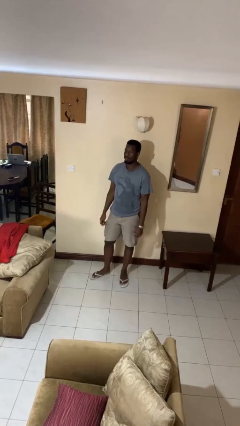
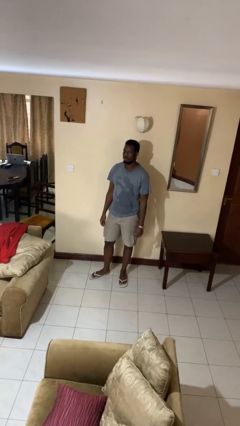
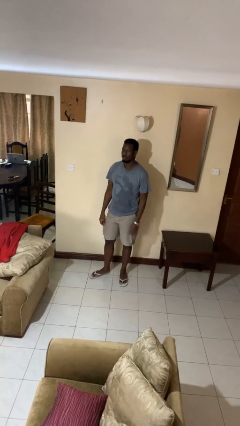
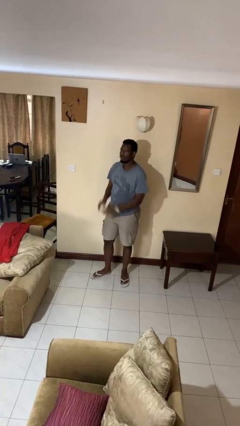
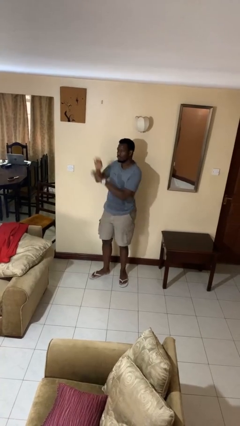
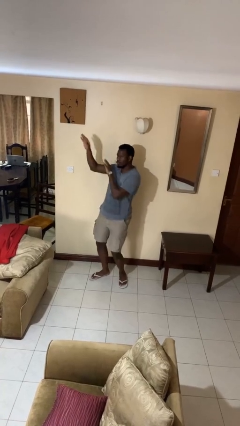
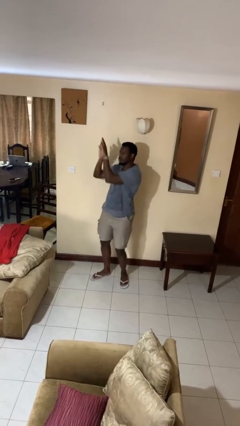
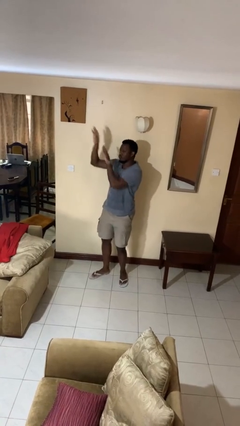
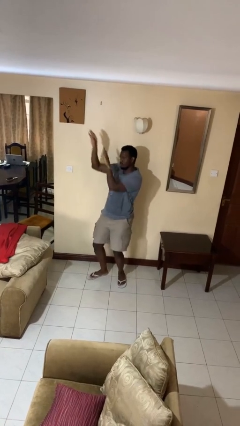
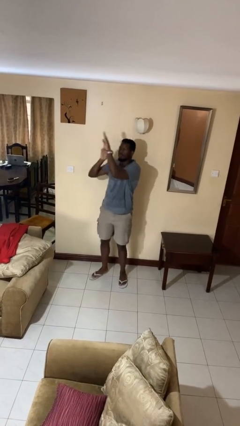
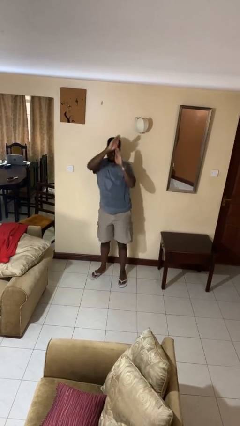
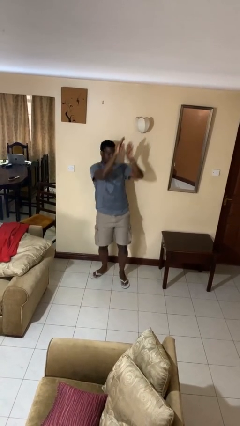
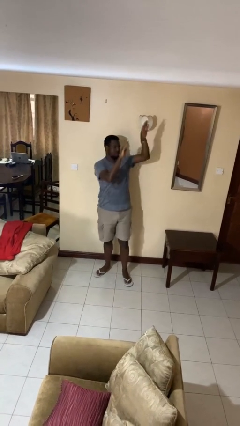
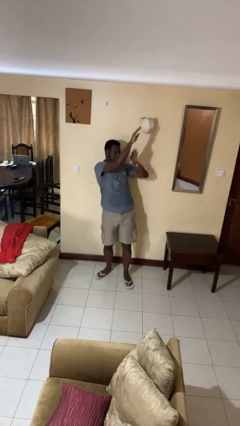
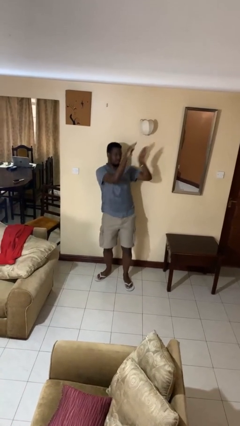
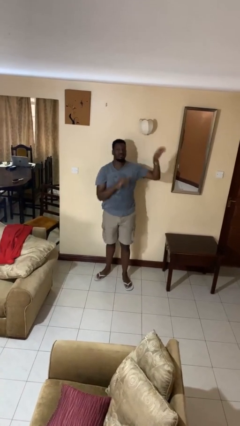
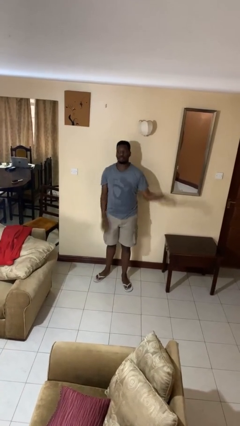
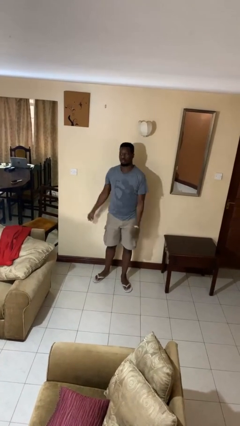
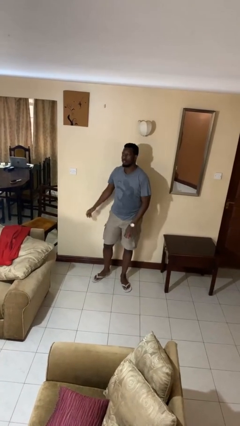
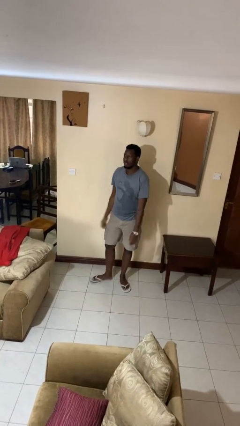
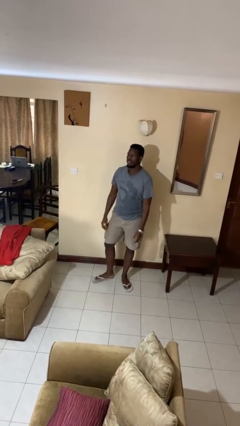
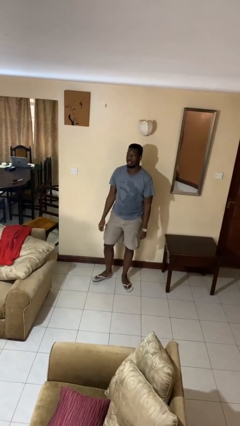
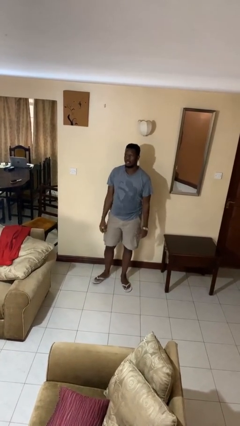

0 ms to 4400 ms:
person dances in place

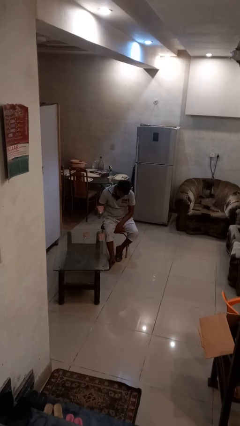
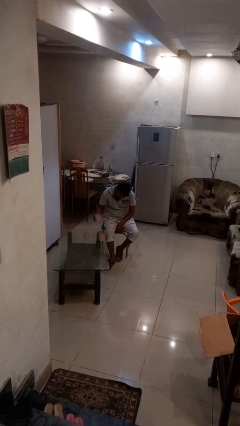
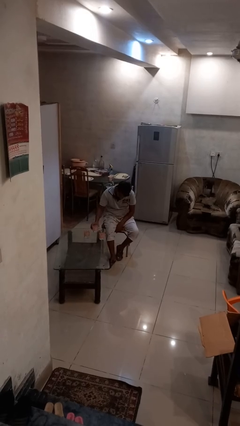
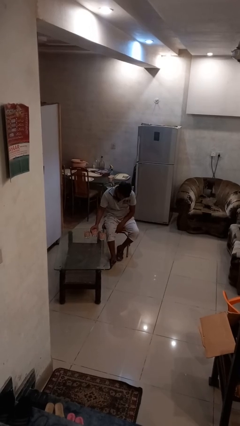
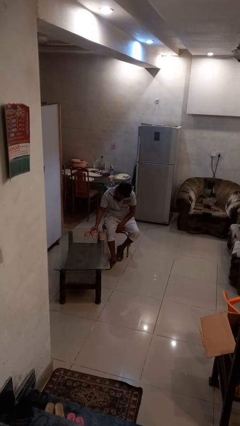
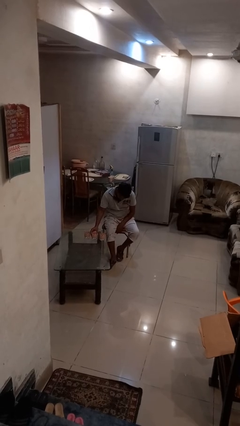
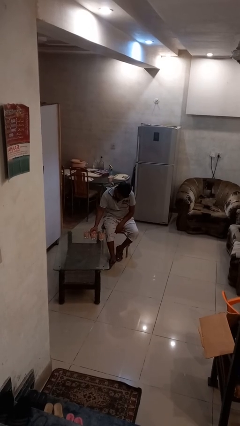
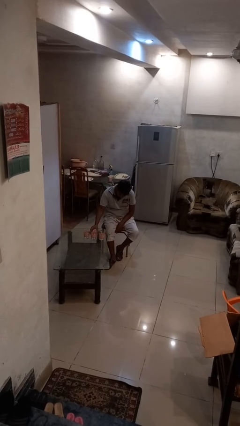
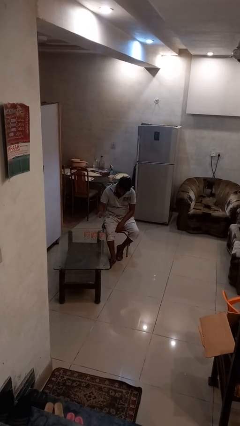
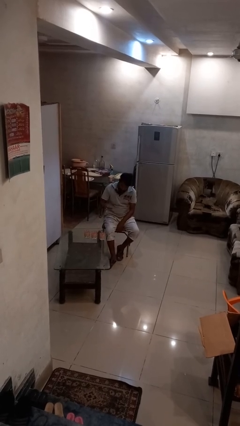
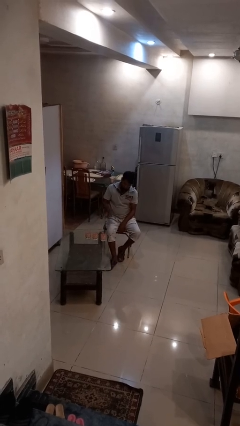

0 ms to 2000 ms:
person puts down object on table

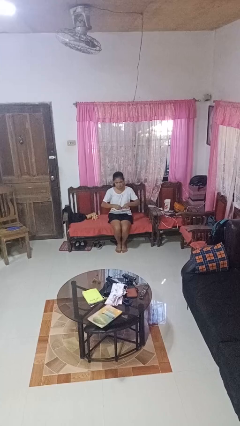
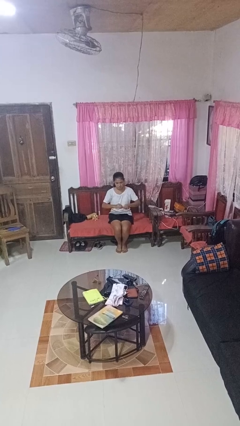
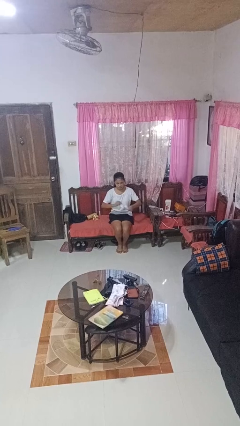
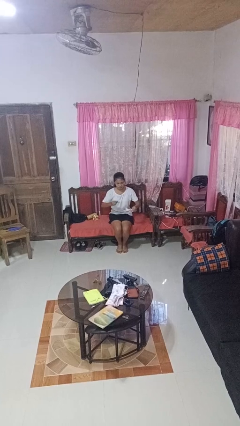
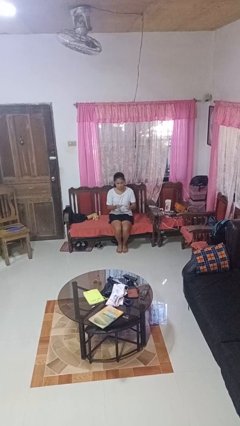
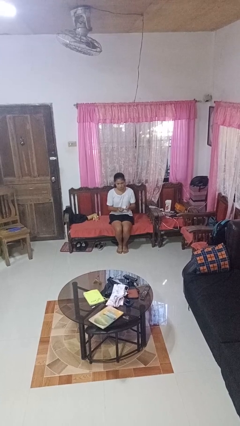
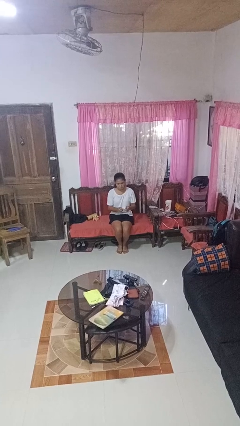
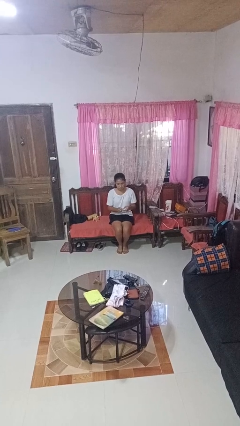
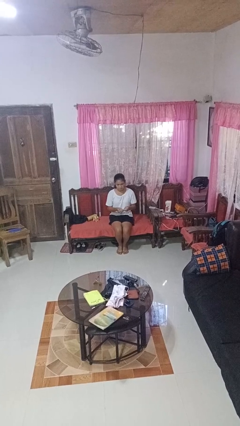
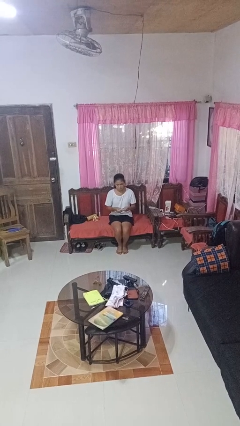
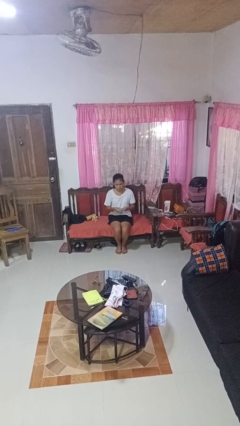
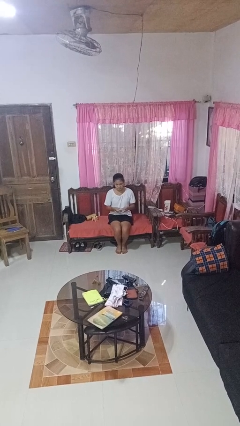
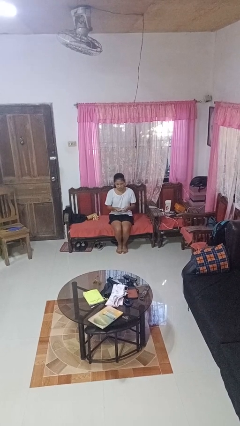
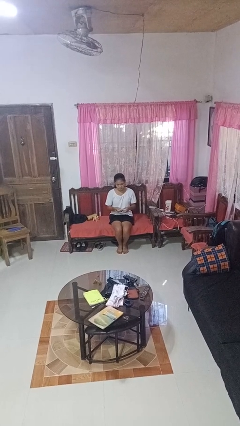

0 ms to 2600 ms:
person tears paper

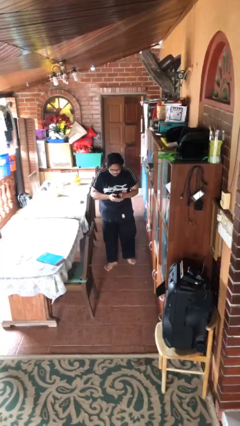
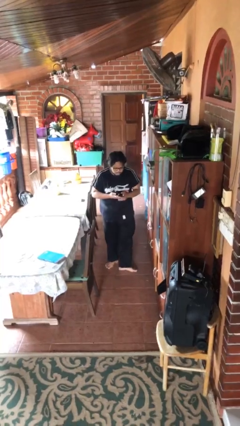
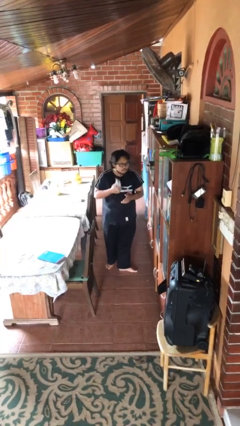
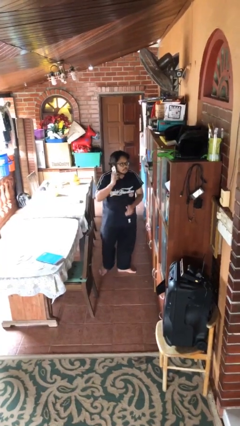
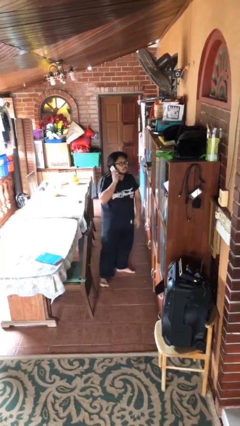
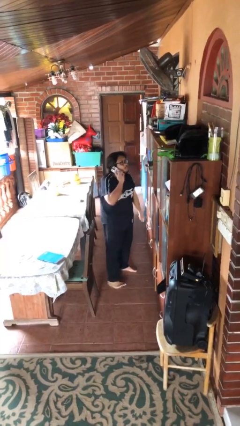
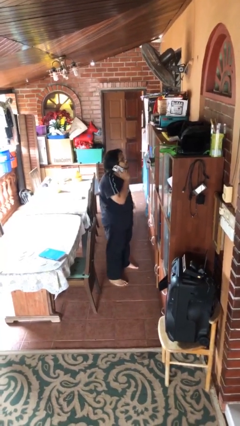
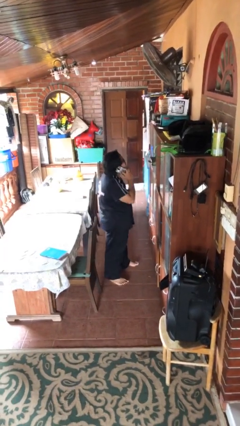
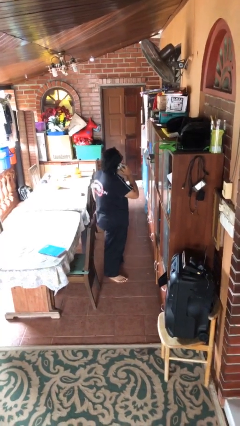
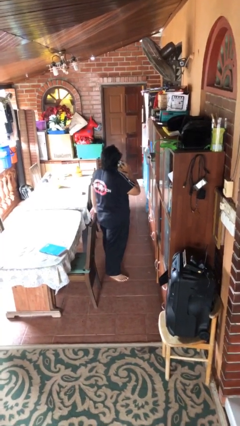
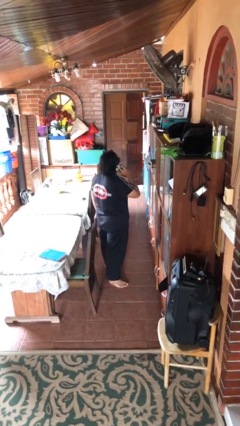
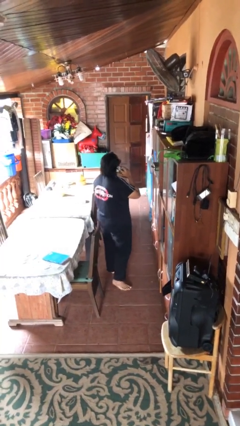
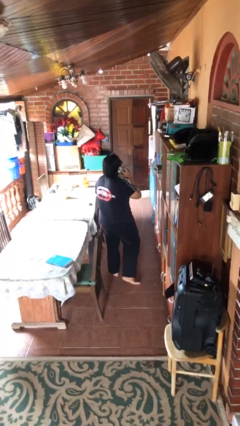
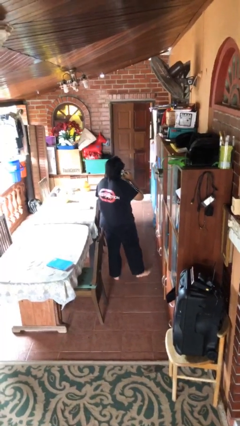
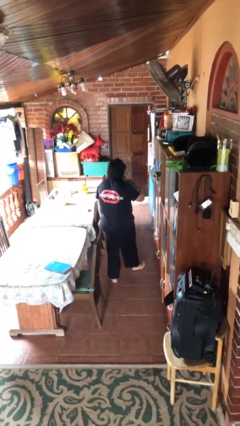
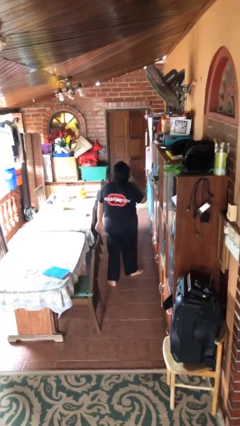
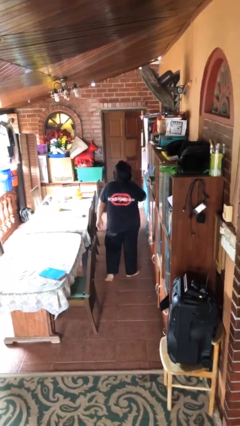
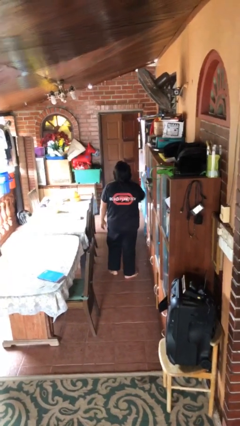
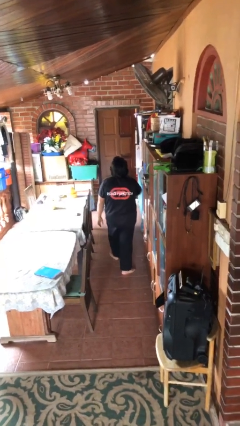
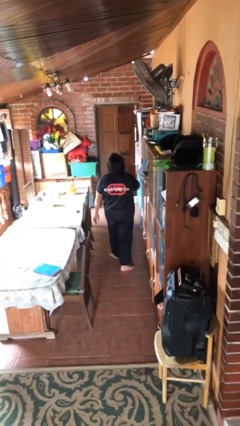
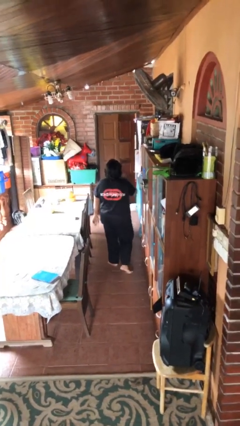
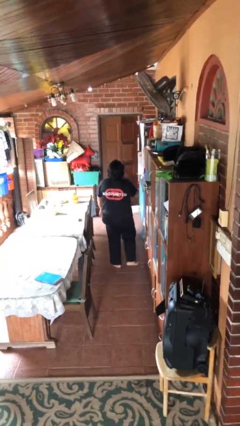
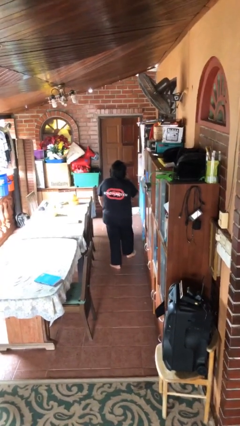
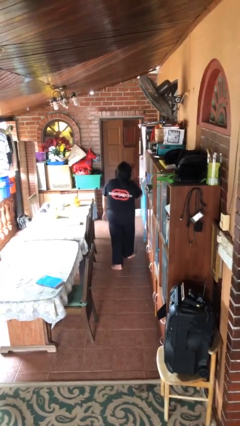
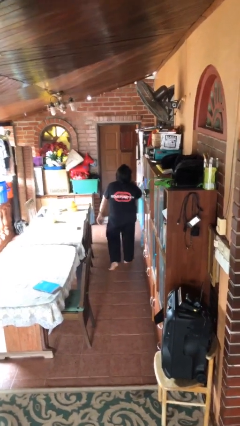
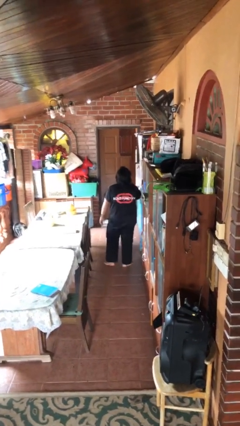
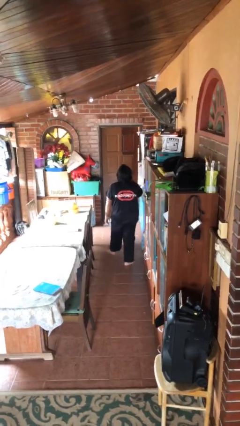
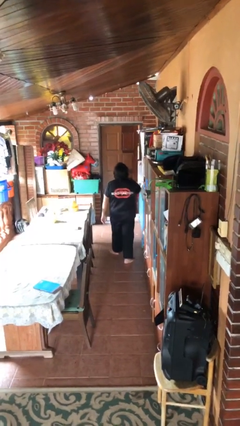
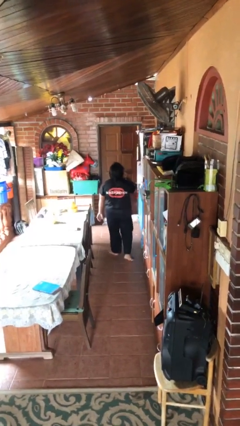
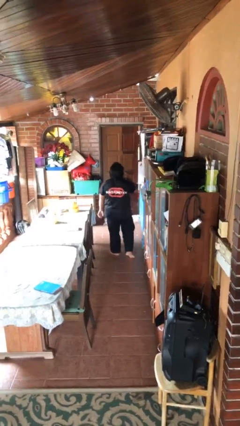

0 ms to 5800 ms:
person talks on phone

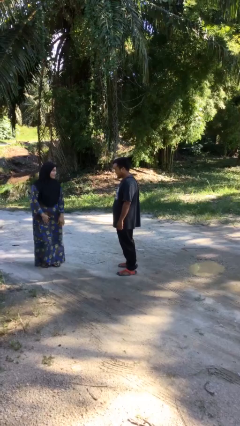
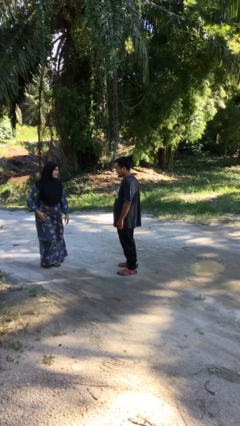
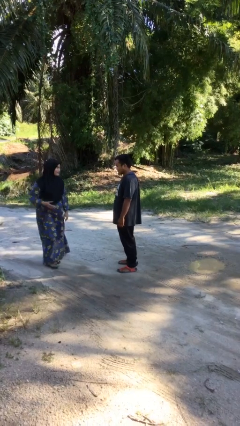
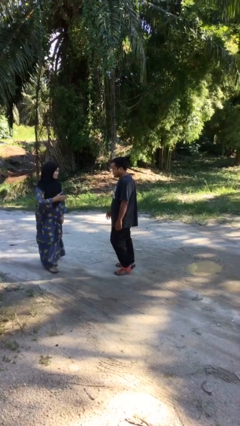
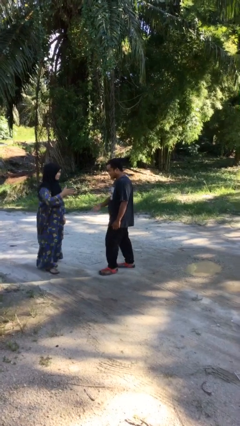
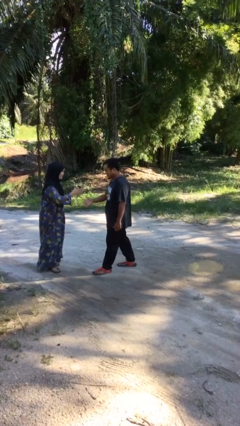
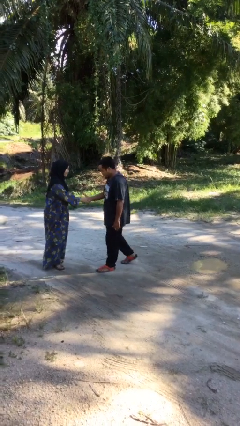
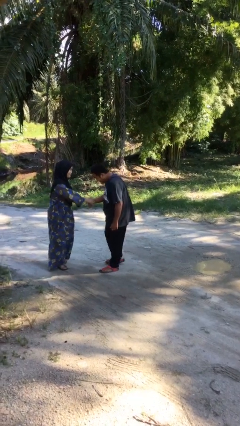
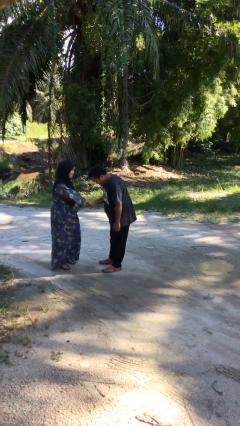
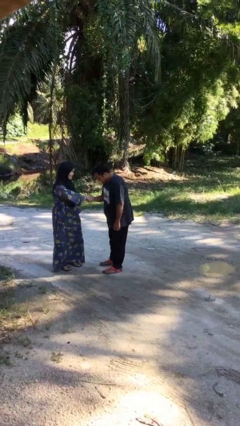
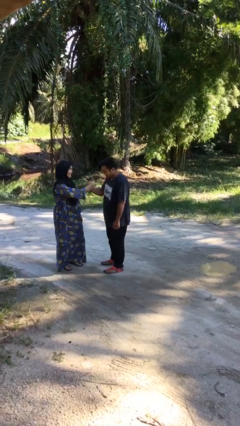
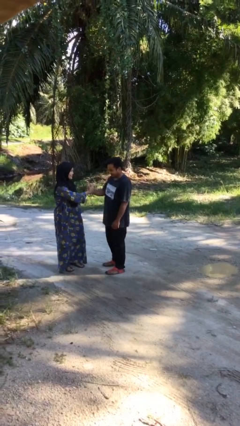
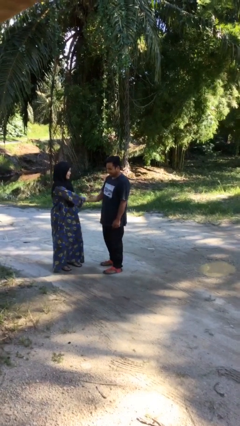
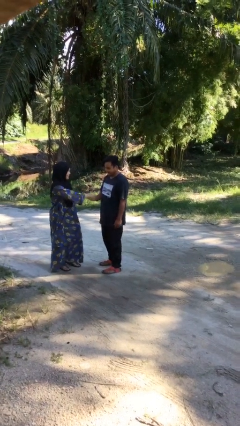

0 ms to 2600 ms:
person shakes hand
